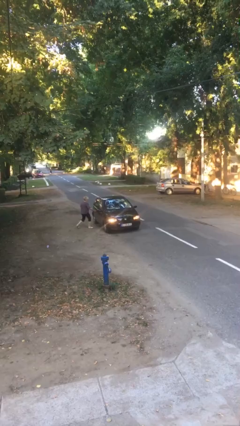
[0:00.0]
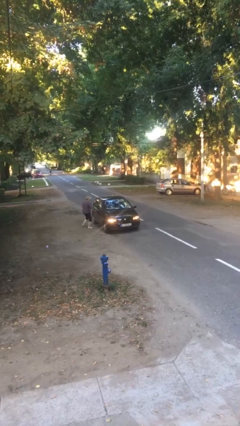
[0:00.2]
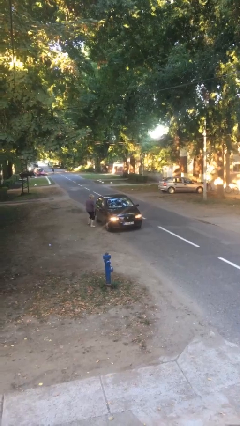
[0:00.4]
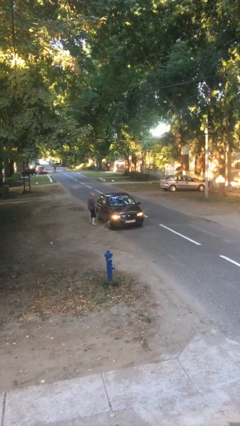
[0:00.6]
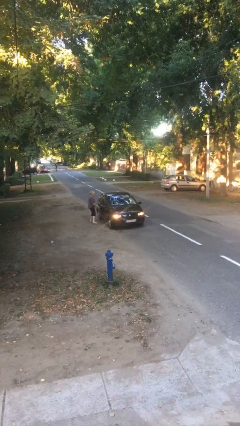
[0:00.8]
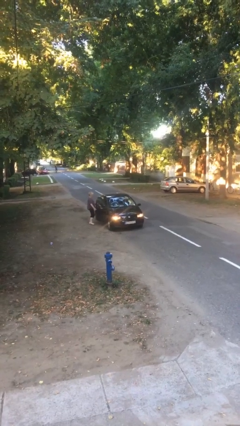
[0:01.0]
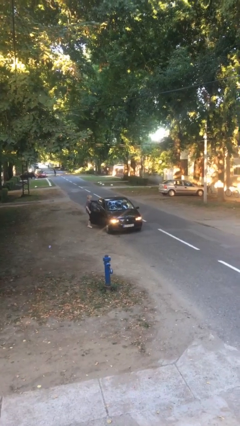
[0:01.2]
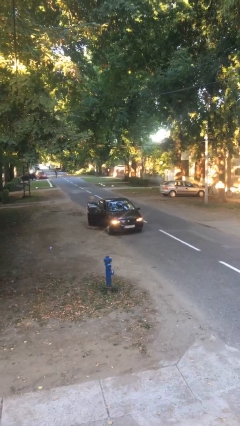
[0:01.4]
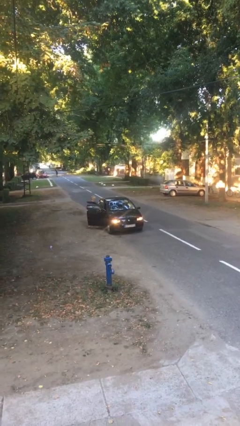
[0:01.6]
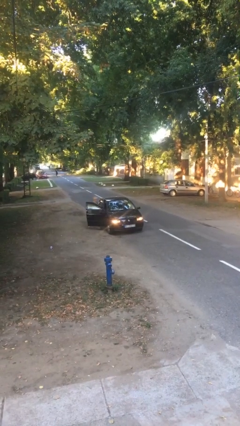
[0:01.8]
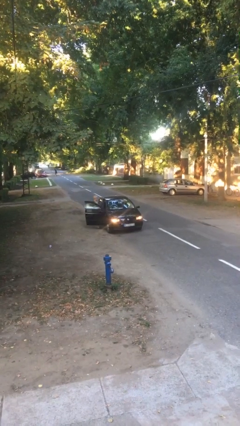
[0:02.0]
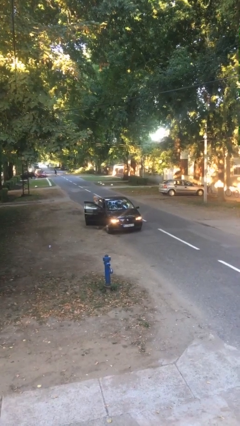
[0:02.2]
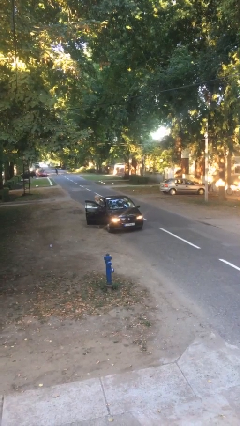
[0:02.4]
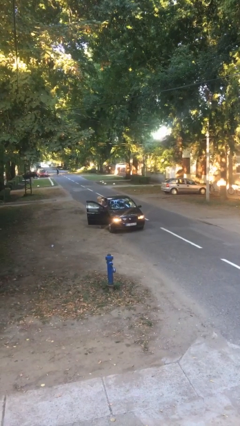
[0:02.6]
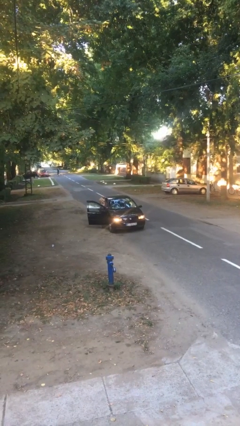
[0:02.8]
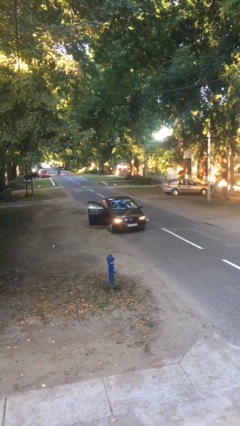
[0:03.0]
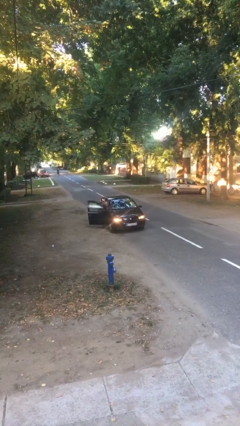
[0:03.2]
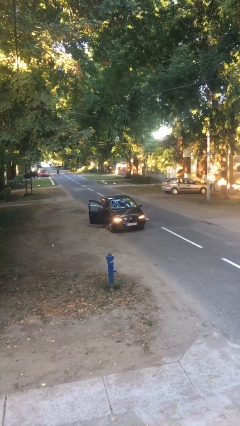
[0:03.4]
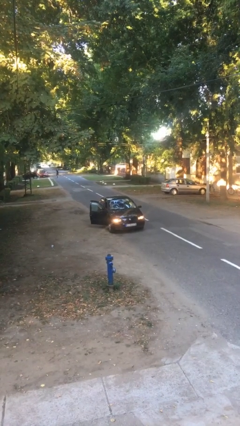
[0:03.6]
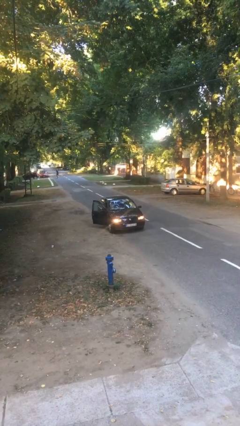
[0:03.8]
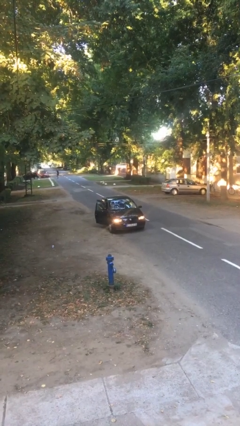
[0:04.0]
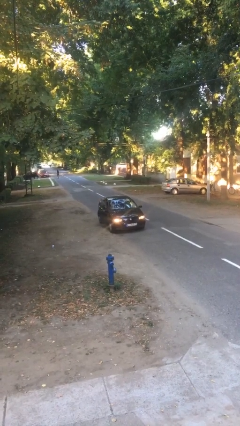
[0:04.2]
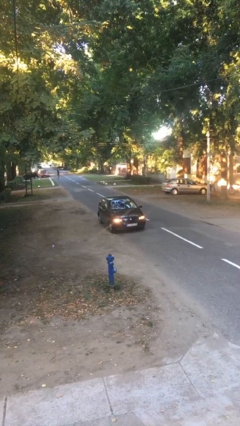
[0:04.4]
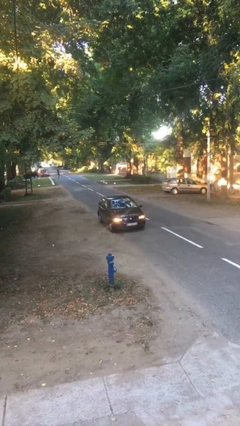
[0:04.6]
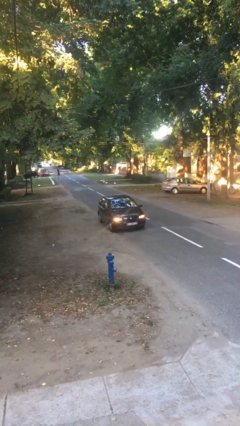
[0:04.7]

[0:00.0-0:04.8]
car picks up person

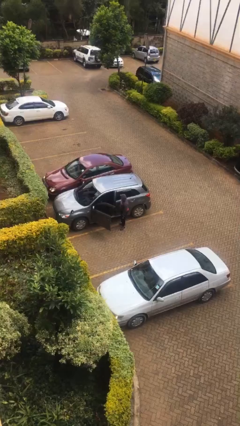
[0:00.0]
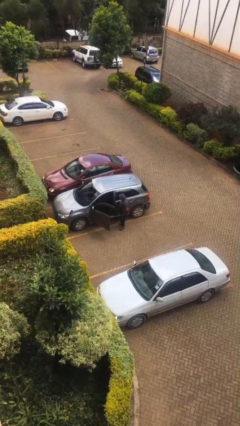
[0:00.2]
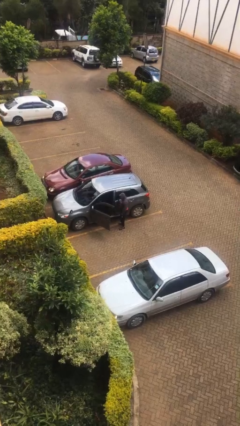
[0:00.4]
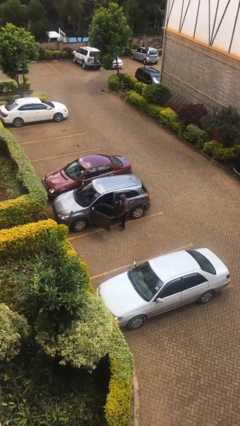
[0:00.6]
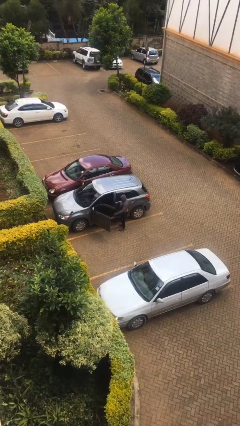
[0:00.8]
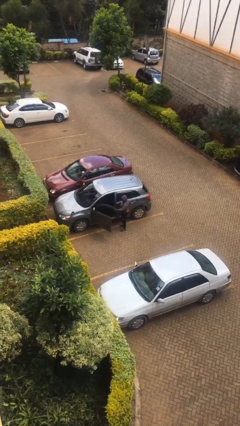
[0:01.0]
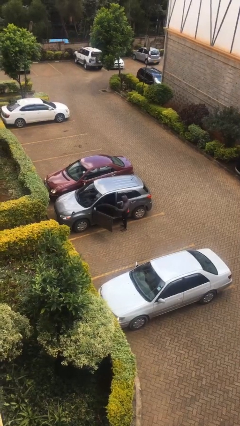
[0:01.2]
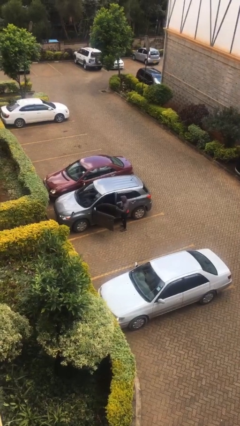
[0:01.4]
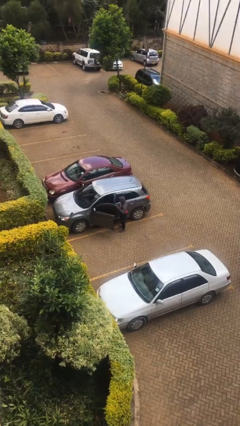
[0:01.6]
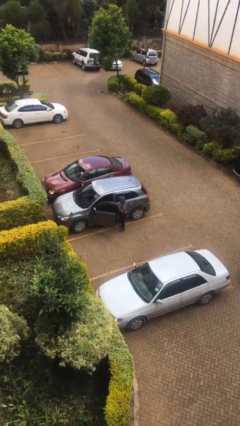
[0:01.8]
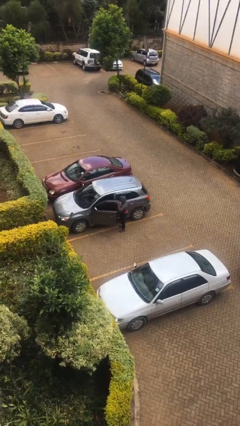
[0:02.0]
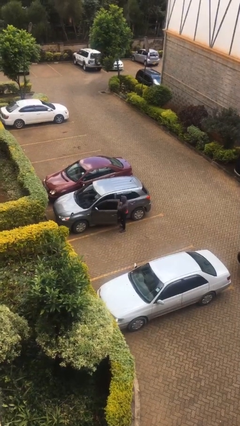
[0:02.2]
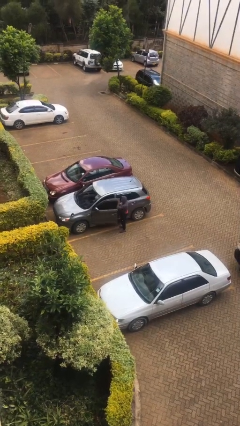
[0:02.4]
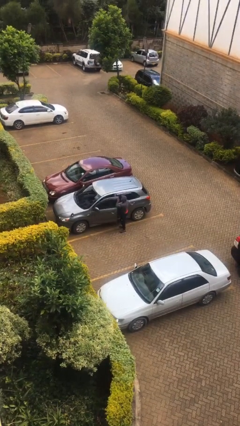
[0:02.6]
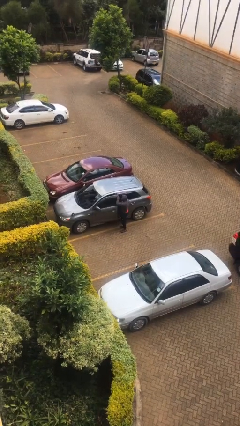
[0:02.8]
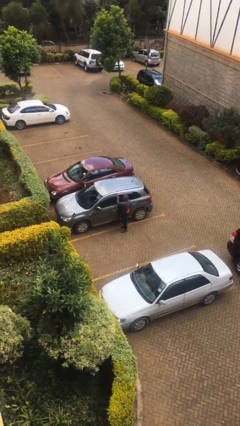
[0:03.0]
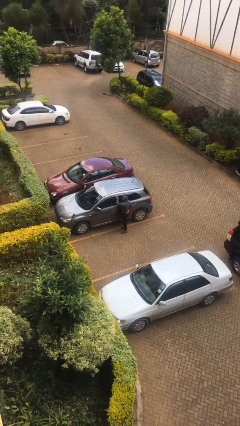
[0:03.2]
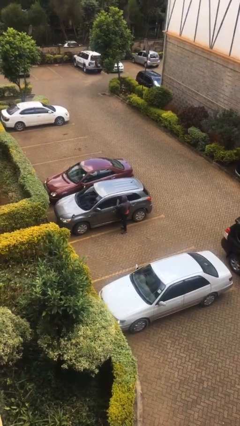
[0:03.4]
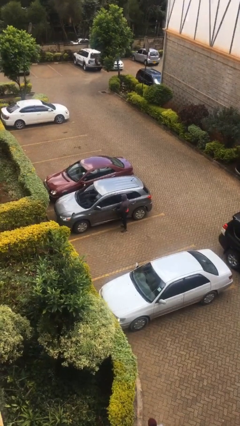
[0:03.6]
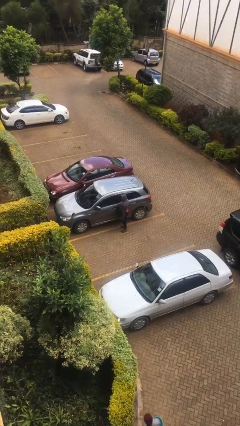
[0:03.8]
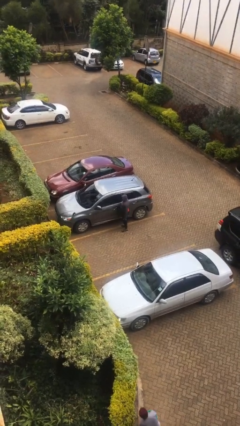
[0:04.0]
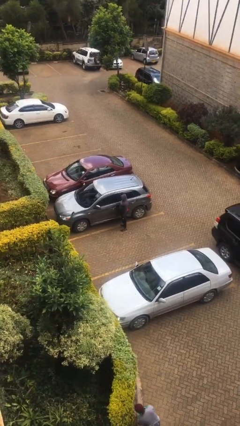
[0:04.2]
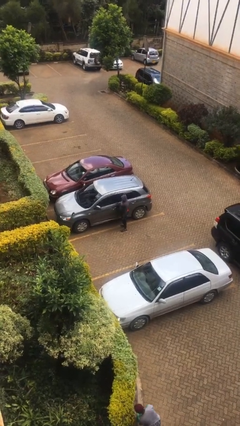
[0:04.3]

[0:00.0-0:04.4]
person closes car door

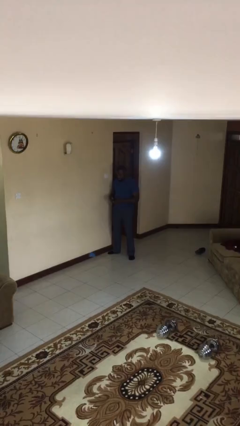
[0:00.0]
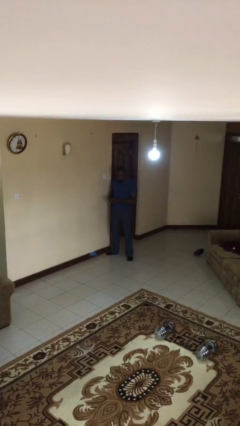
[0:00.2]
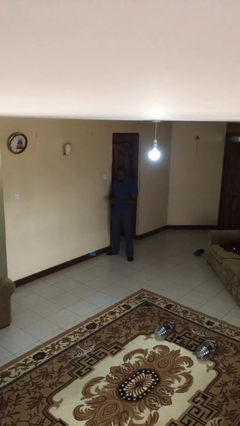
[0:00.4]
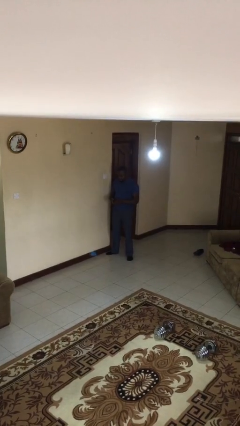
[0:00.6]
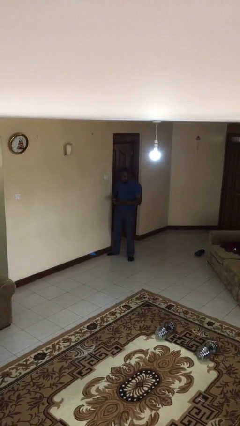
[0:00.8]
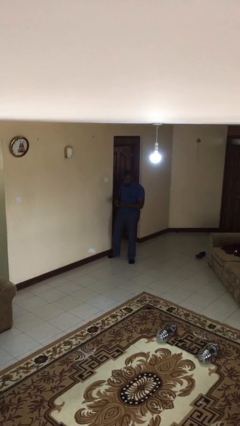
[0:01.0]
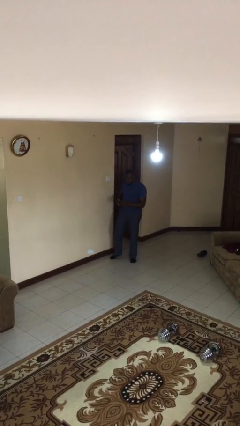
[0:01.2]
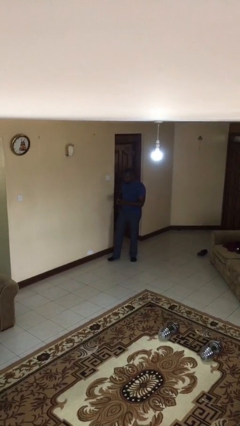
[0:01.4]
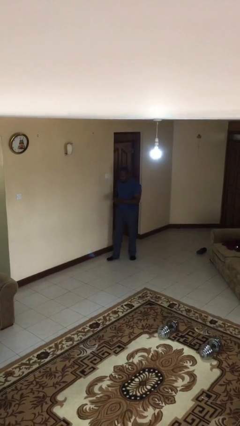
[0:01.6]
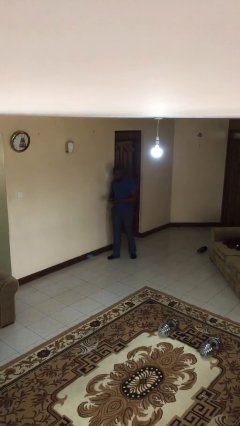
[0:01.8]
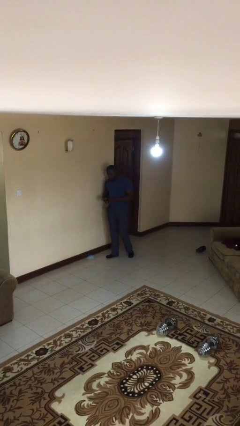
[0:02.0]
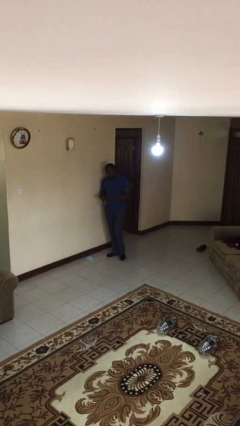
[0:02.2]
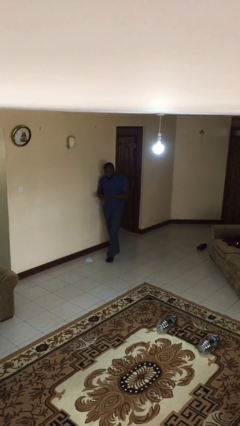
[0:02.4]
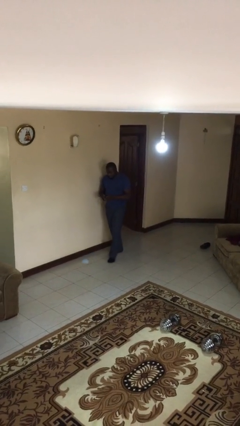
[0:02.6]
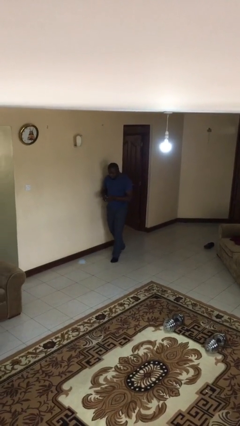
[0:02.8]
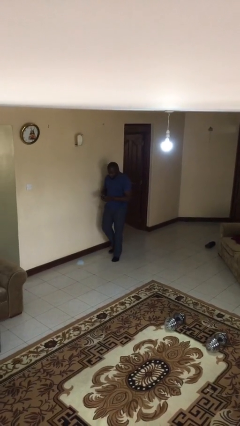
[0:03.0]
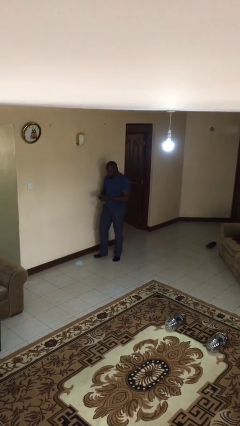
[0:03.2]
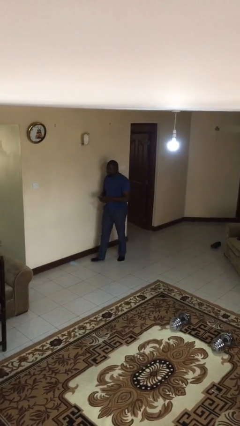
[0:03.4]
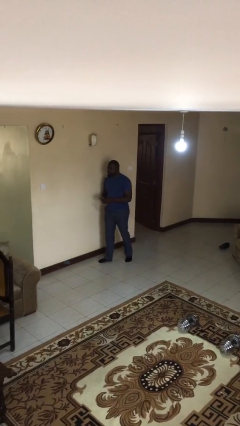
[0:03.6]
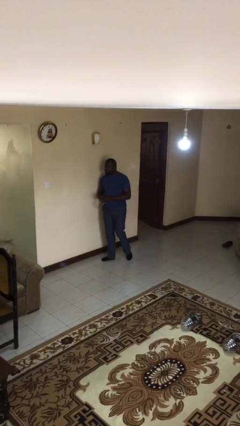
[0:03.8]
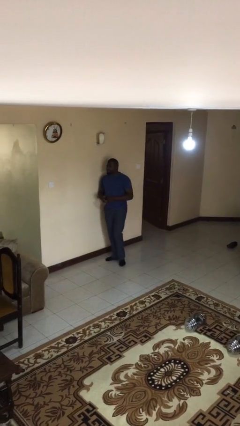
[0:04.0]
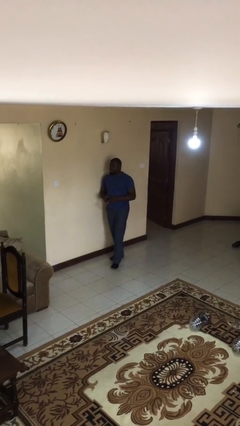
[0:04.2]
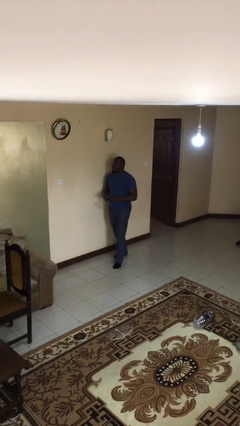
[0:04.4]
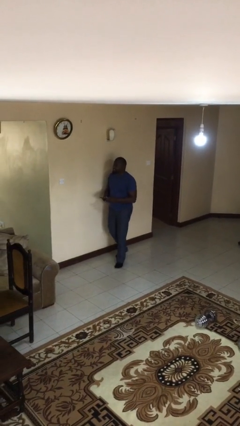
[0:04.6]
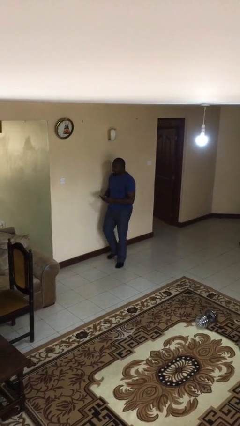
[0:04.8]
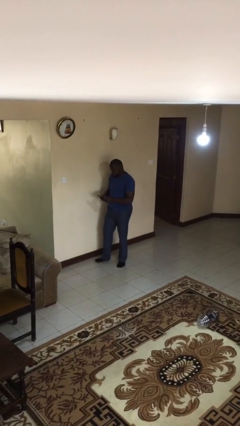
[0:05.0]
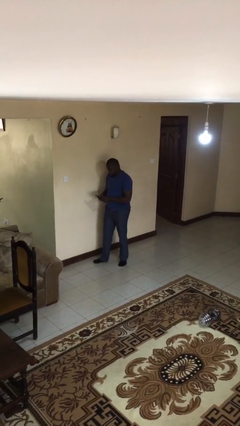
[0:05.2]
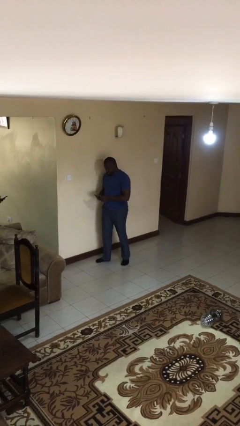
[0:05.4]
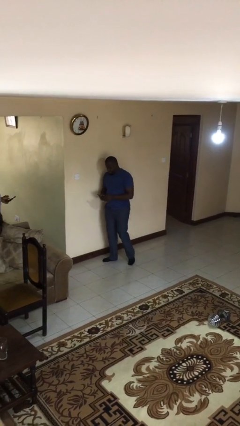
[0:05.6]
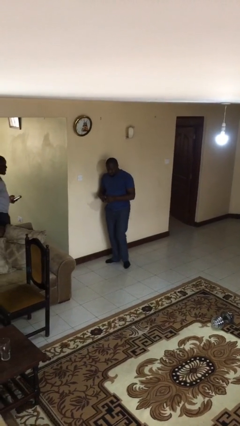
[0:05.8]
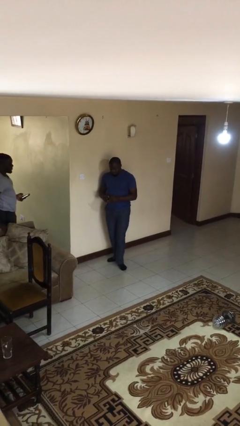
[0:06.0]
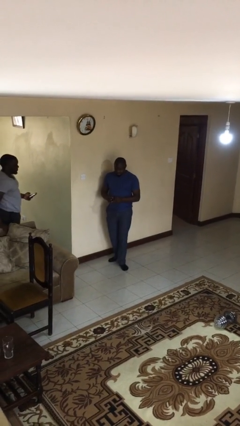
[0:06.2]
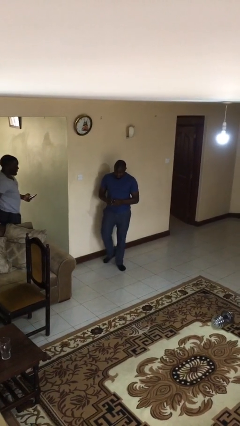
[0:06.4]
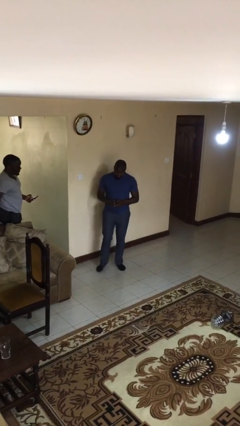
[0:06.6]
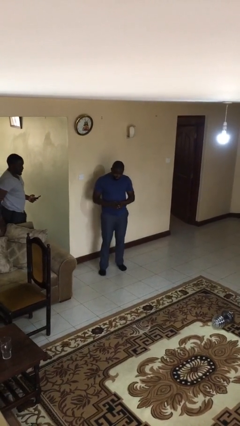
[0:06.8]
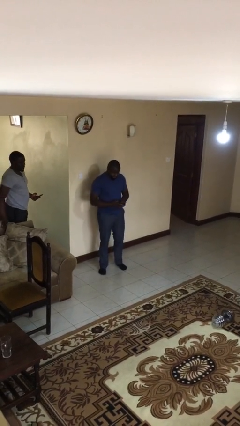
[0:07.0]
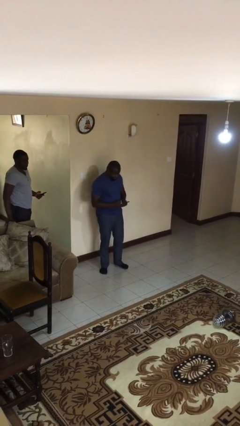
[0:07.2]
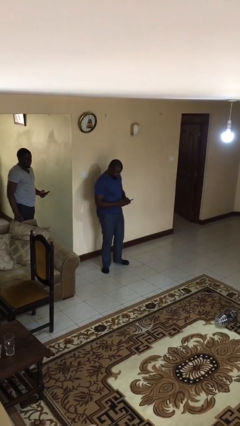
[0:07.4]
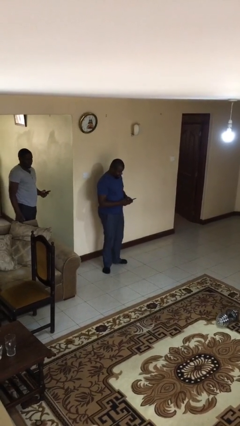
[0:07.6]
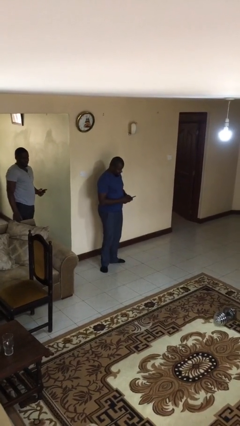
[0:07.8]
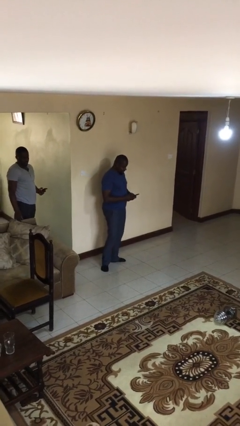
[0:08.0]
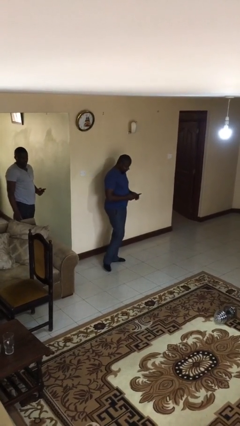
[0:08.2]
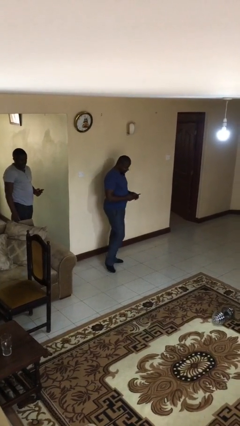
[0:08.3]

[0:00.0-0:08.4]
person texts on phone
